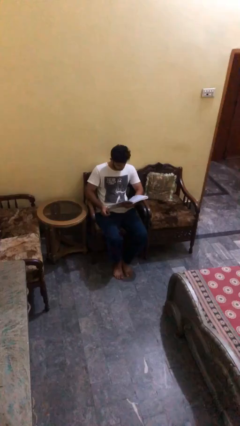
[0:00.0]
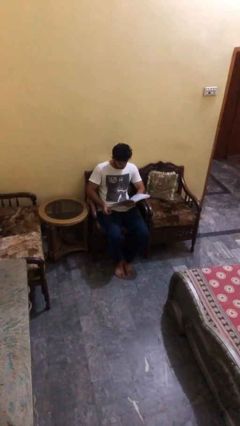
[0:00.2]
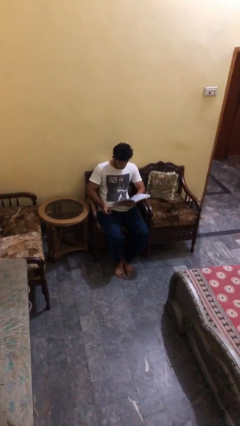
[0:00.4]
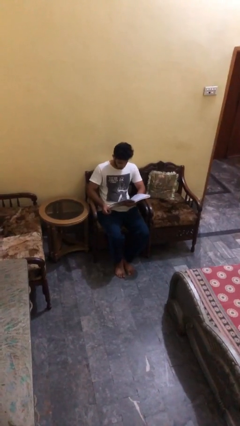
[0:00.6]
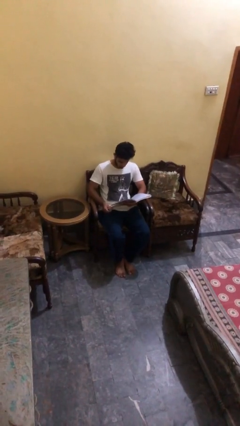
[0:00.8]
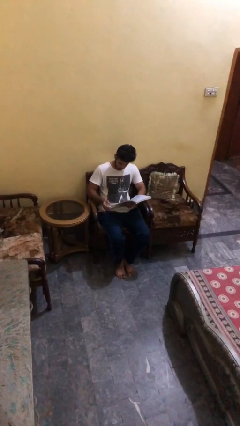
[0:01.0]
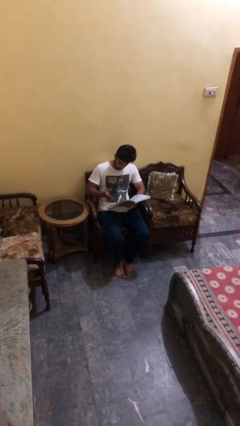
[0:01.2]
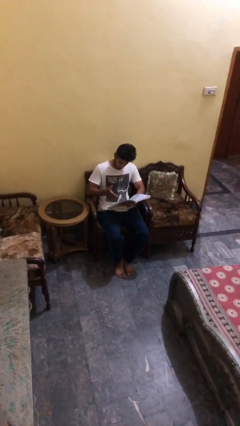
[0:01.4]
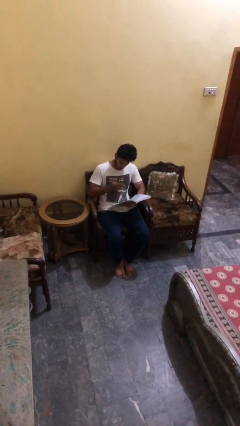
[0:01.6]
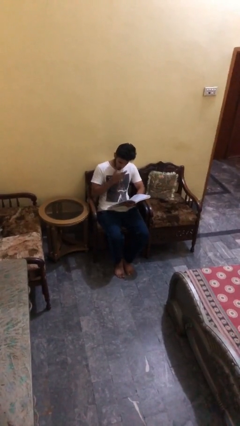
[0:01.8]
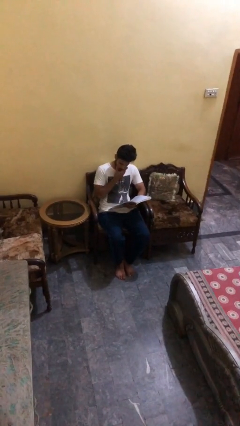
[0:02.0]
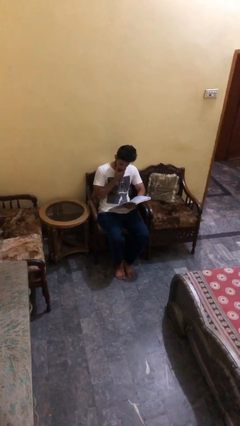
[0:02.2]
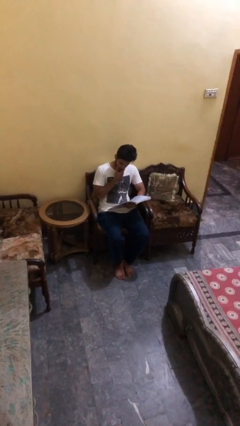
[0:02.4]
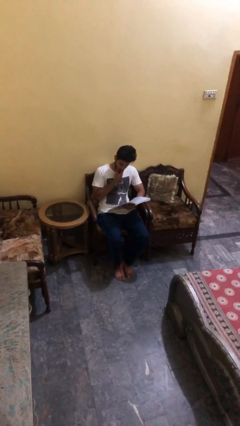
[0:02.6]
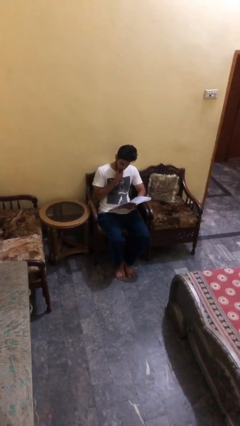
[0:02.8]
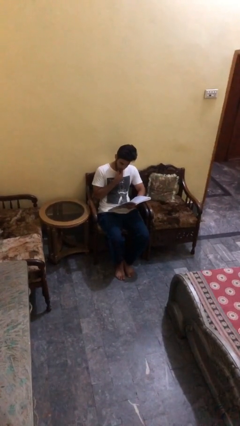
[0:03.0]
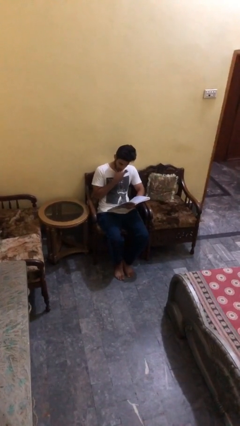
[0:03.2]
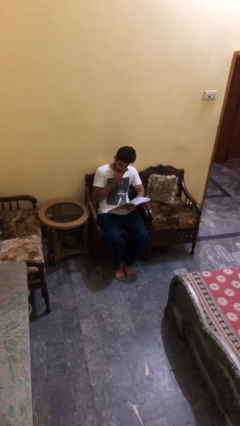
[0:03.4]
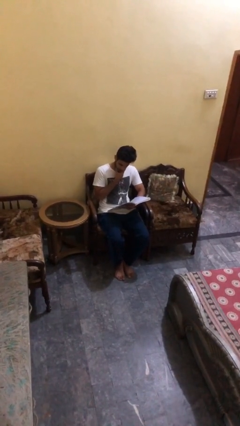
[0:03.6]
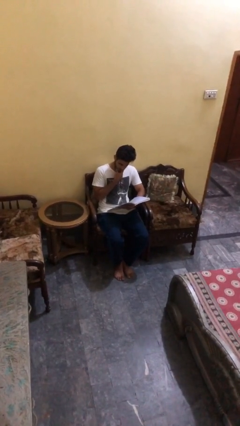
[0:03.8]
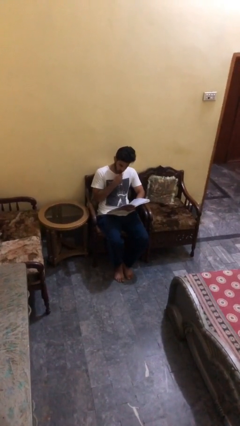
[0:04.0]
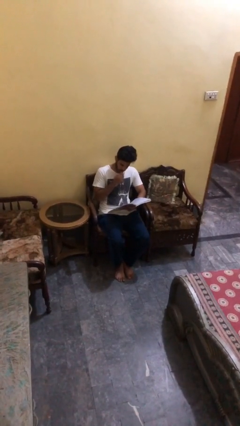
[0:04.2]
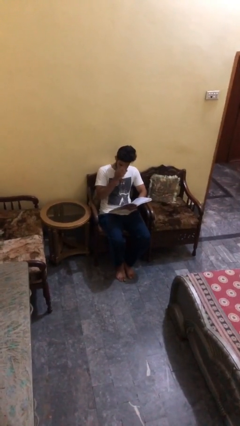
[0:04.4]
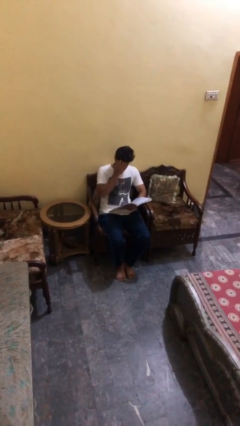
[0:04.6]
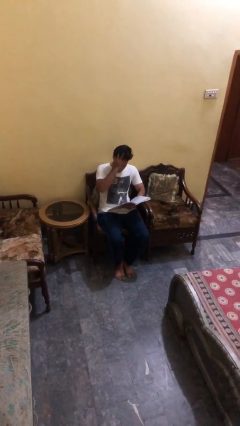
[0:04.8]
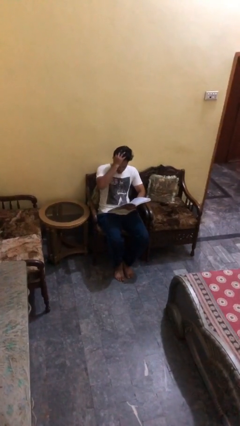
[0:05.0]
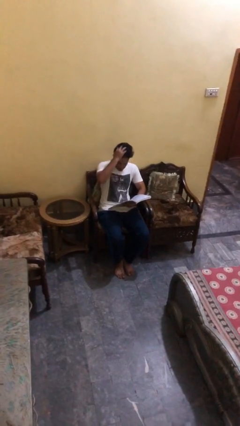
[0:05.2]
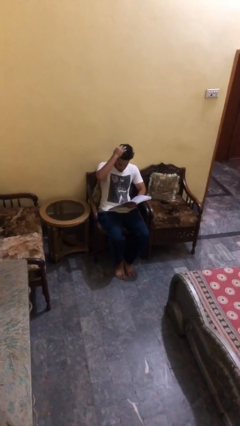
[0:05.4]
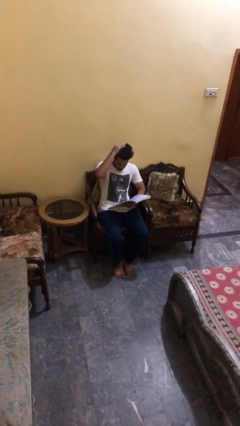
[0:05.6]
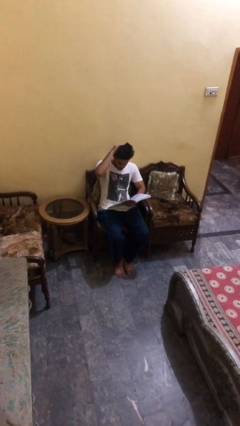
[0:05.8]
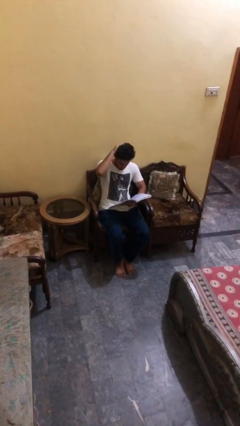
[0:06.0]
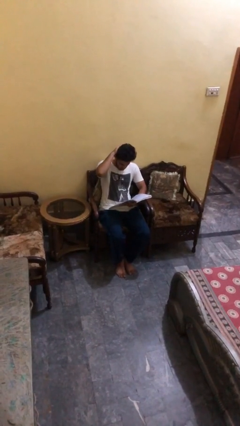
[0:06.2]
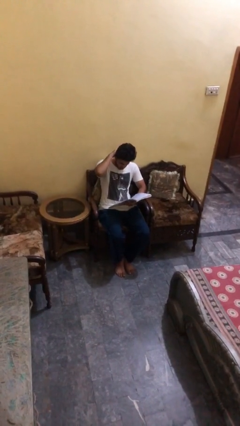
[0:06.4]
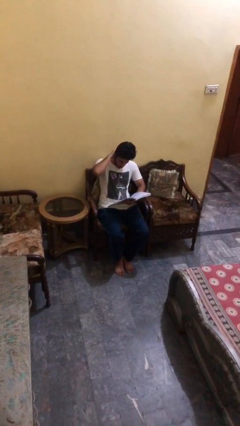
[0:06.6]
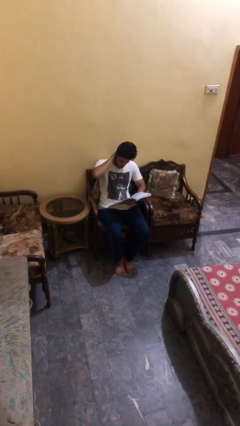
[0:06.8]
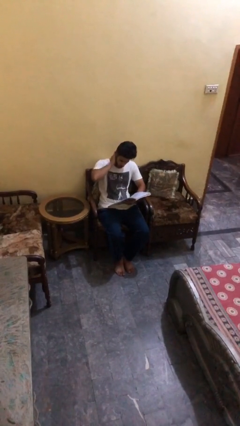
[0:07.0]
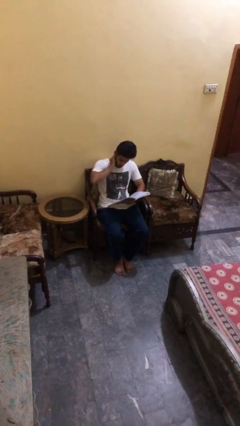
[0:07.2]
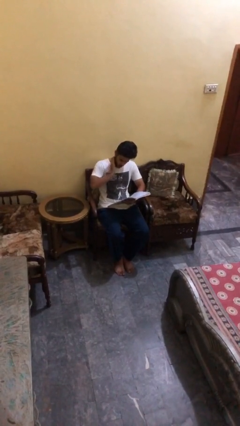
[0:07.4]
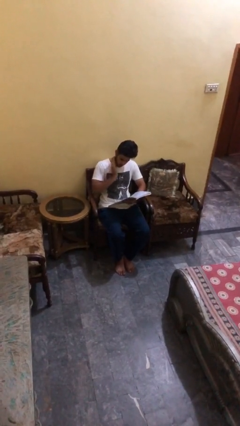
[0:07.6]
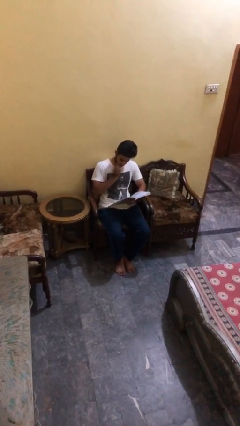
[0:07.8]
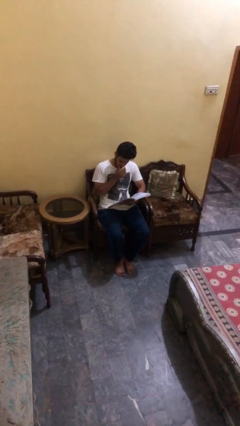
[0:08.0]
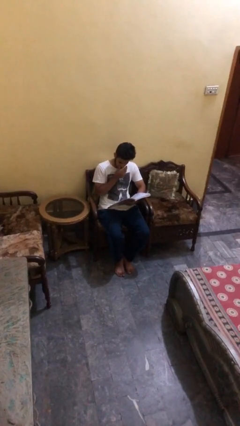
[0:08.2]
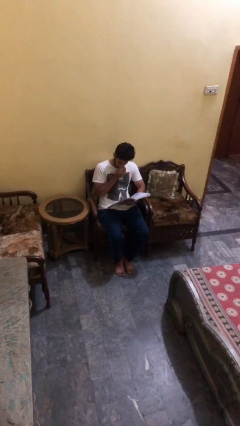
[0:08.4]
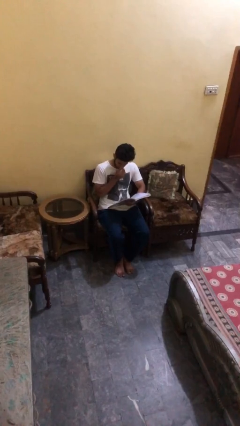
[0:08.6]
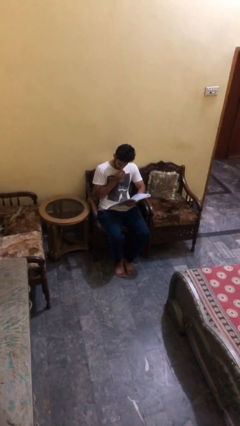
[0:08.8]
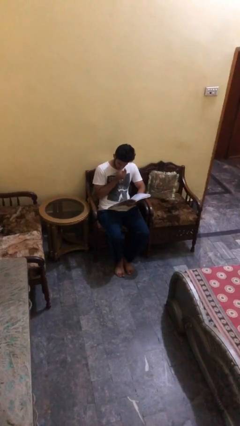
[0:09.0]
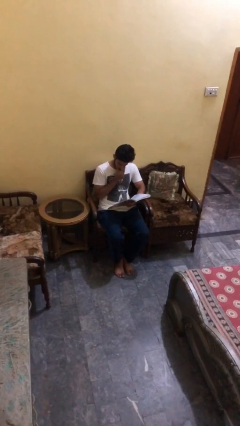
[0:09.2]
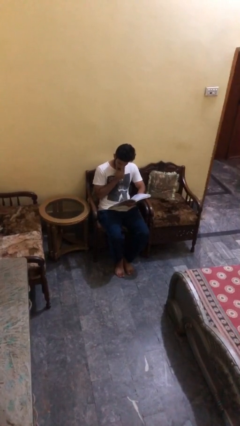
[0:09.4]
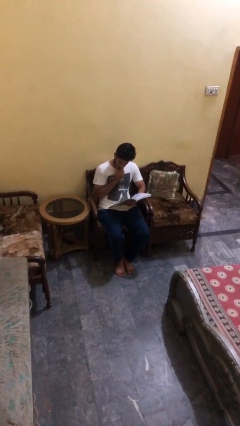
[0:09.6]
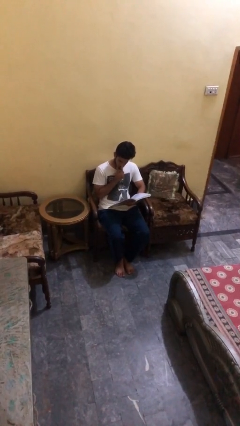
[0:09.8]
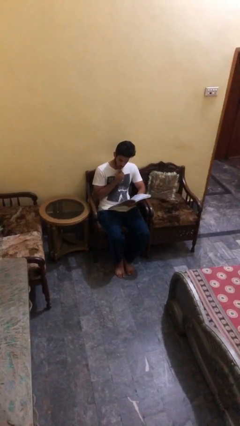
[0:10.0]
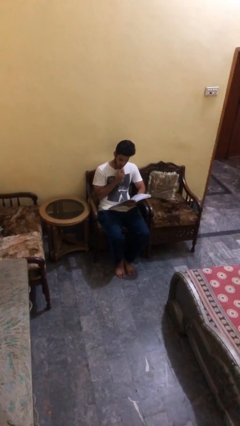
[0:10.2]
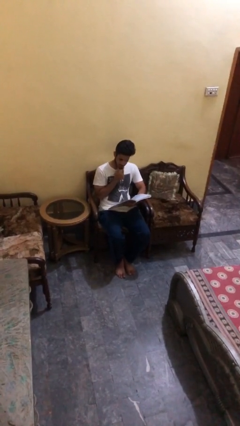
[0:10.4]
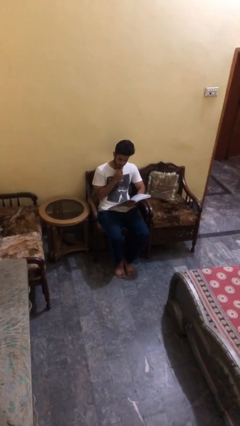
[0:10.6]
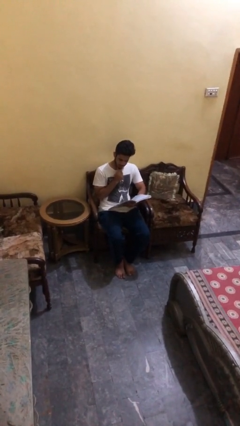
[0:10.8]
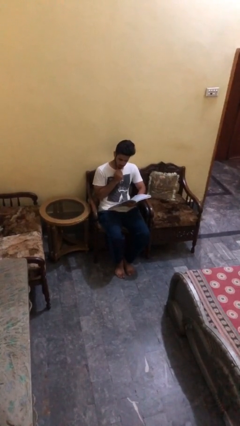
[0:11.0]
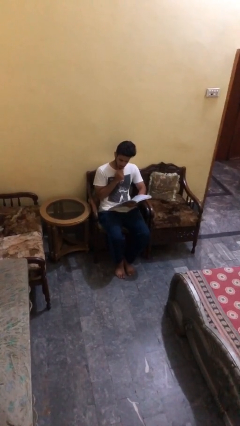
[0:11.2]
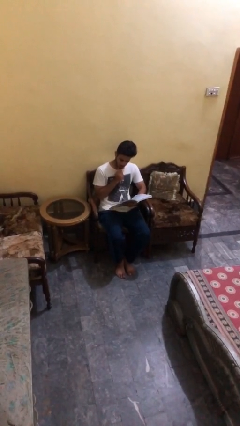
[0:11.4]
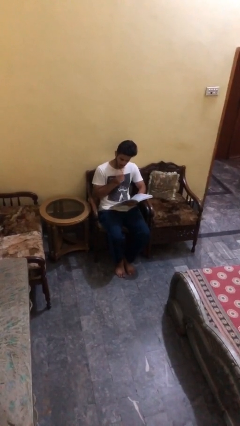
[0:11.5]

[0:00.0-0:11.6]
person reads document

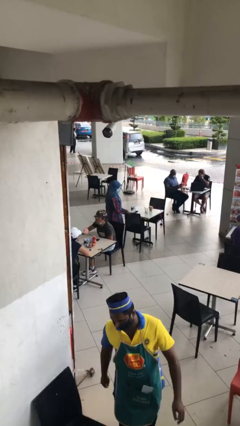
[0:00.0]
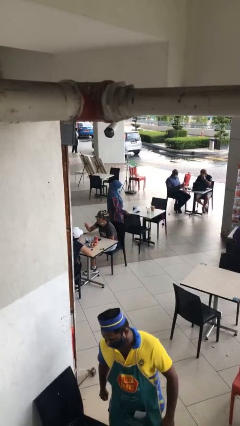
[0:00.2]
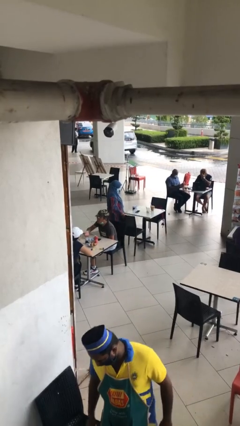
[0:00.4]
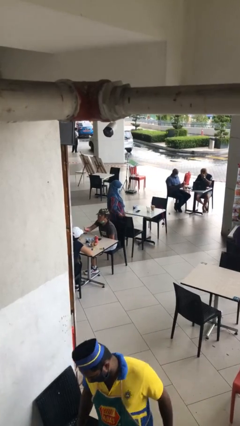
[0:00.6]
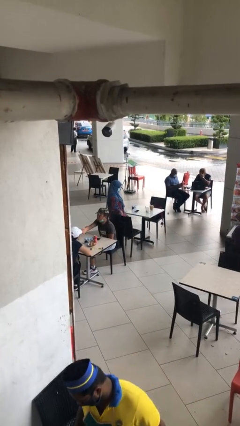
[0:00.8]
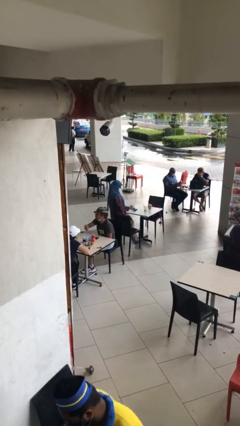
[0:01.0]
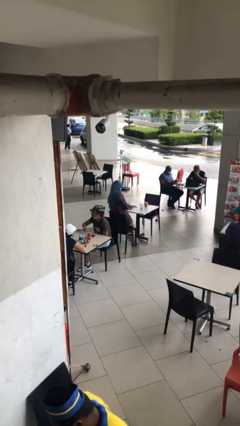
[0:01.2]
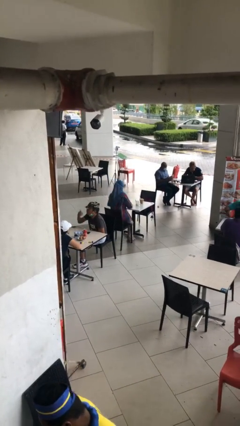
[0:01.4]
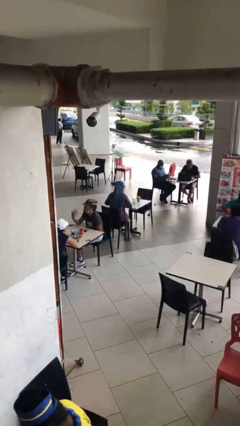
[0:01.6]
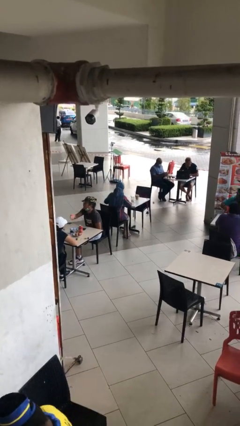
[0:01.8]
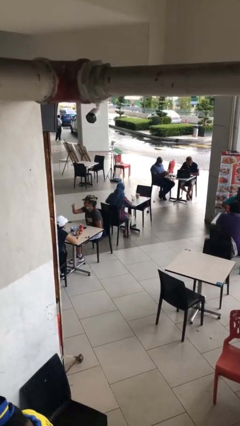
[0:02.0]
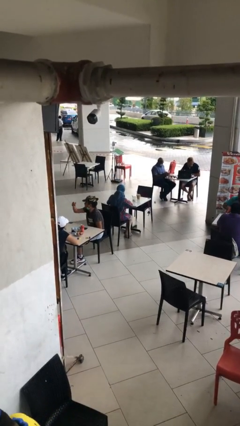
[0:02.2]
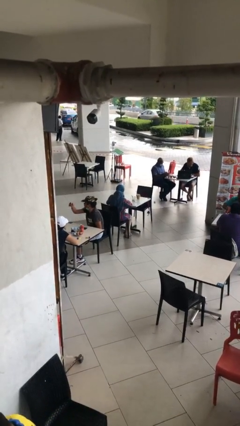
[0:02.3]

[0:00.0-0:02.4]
person sits down

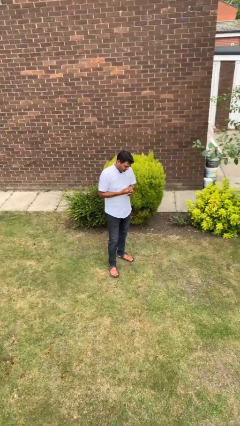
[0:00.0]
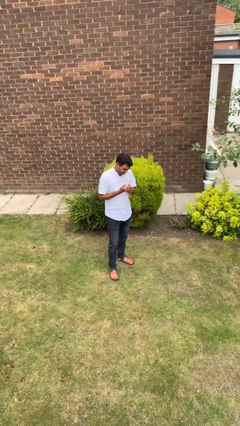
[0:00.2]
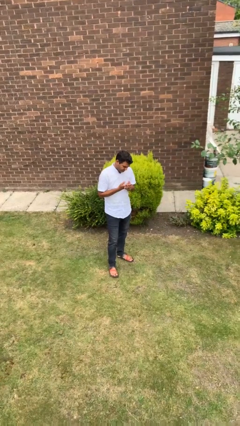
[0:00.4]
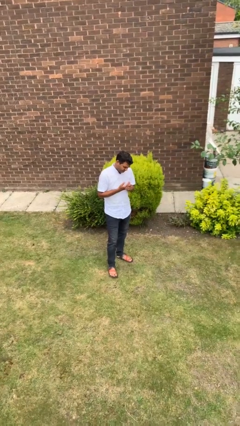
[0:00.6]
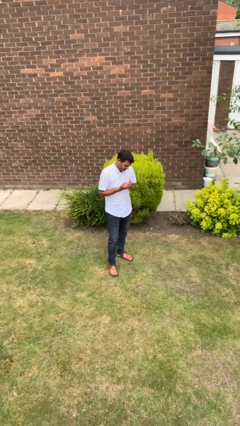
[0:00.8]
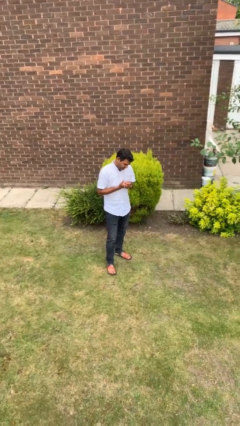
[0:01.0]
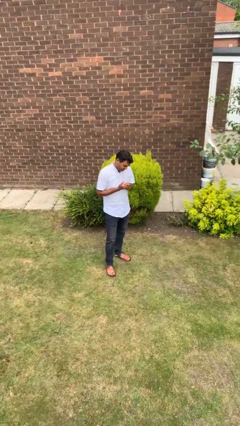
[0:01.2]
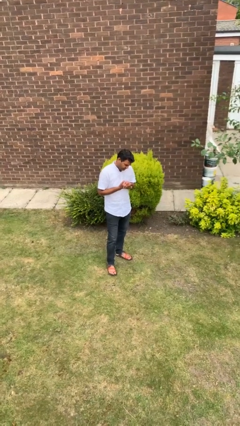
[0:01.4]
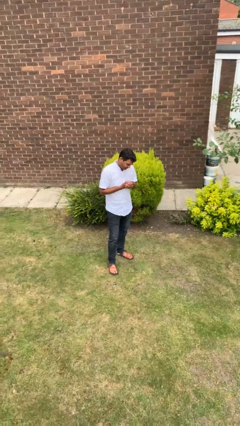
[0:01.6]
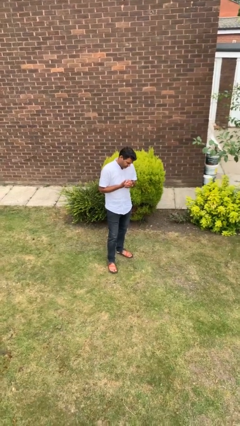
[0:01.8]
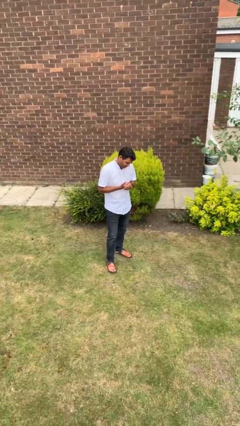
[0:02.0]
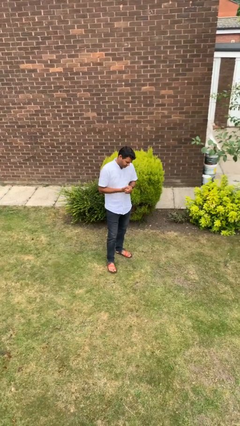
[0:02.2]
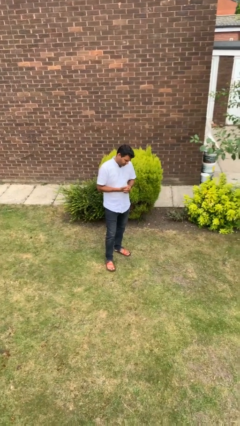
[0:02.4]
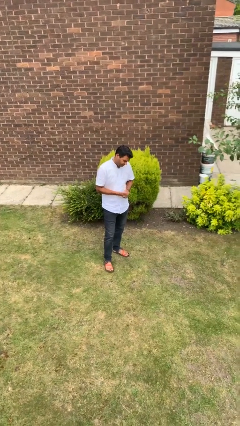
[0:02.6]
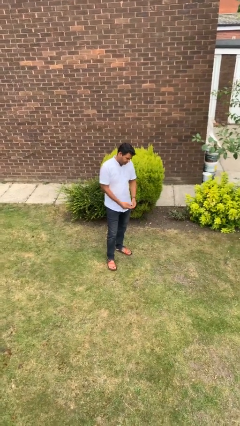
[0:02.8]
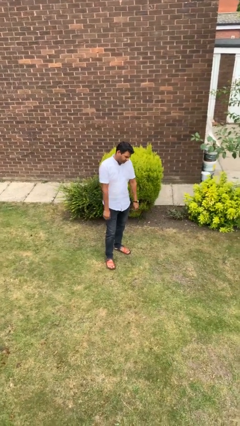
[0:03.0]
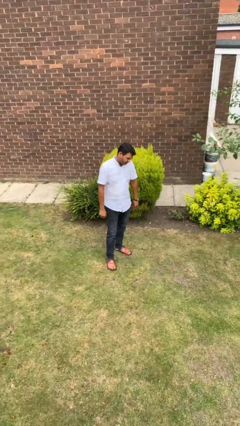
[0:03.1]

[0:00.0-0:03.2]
person cracks knuckles

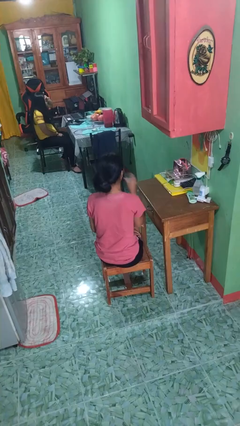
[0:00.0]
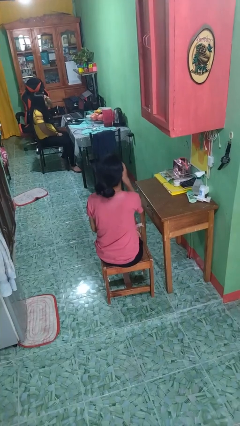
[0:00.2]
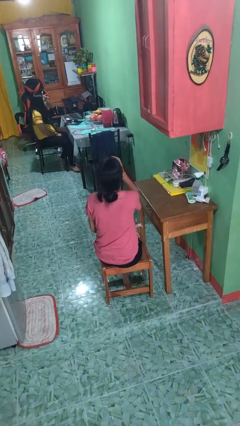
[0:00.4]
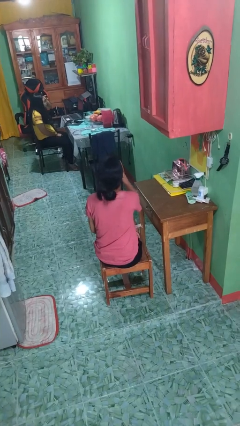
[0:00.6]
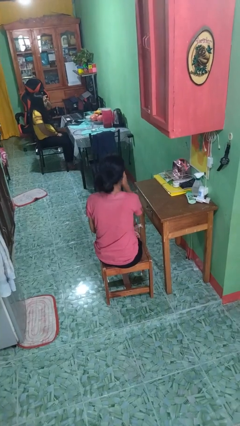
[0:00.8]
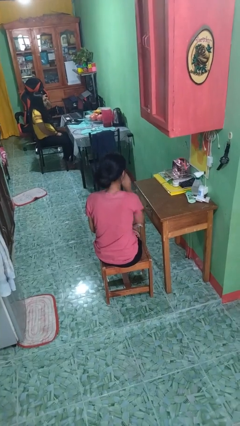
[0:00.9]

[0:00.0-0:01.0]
person drinks from shotglass
